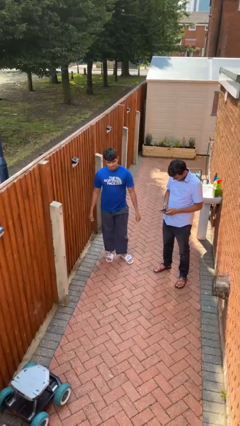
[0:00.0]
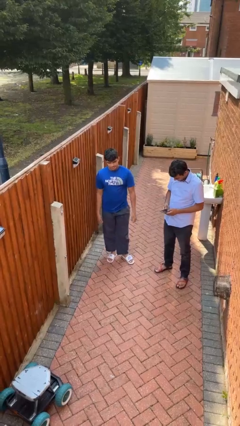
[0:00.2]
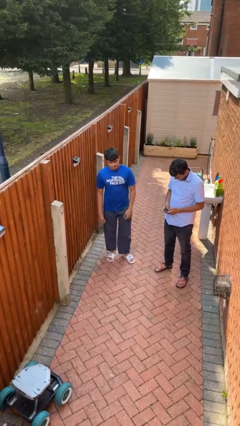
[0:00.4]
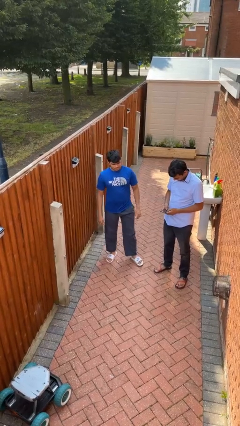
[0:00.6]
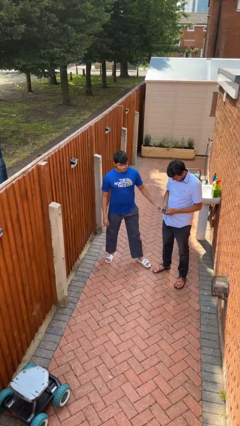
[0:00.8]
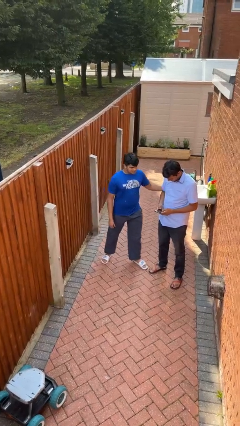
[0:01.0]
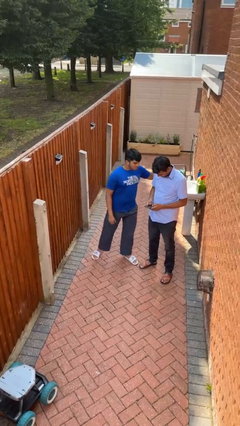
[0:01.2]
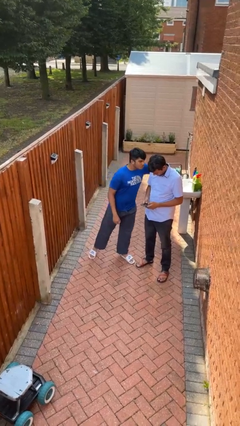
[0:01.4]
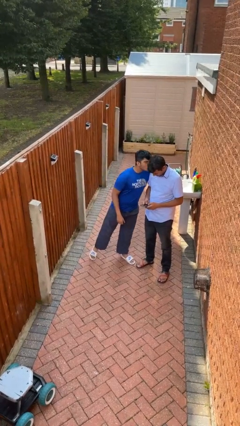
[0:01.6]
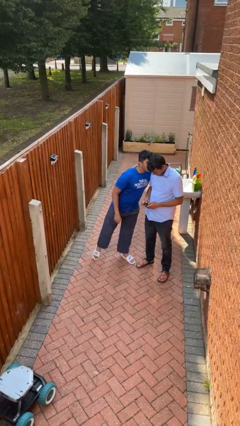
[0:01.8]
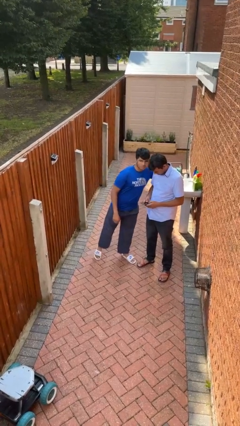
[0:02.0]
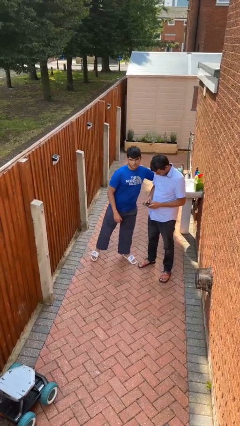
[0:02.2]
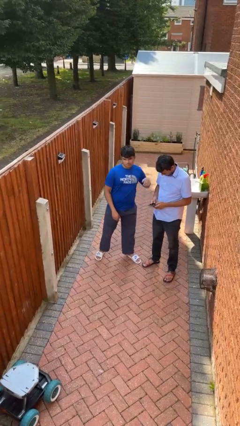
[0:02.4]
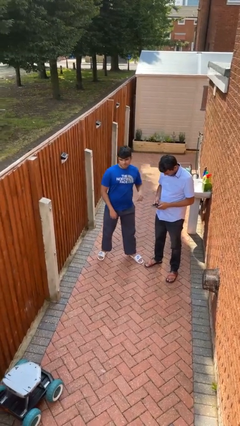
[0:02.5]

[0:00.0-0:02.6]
person kisses cheek of person

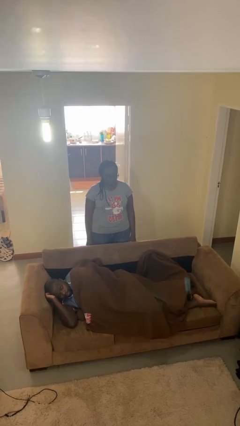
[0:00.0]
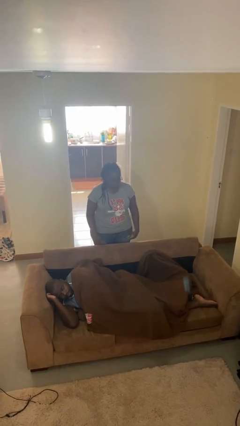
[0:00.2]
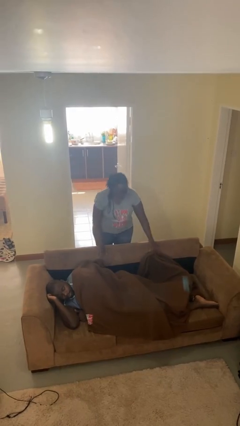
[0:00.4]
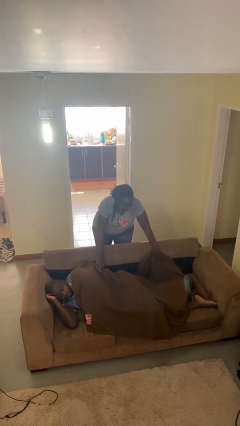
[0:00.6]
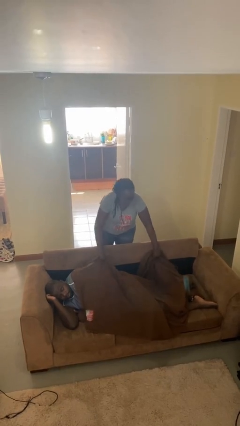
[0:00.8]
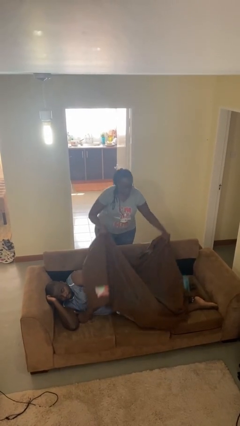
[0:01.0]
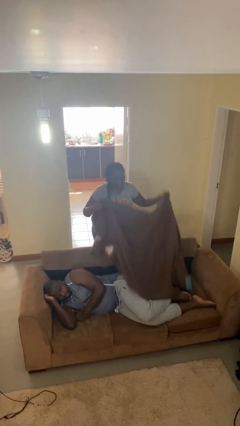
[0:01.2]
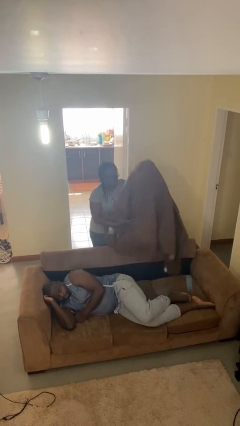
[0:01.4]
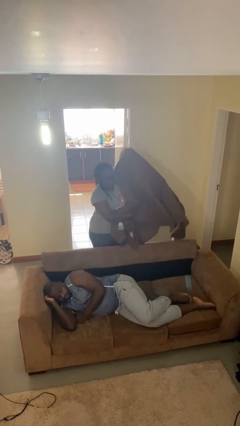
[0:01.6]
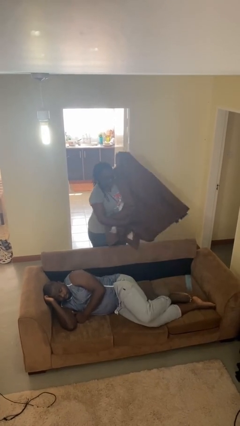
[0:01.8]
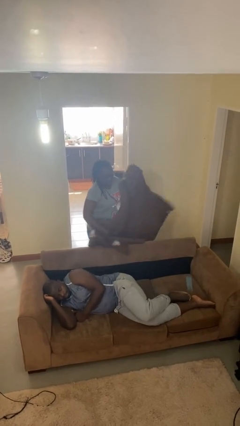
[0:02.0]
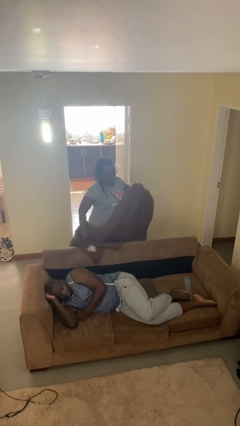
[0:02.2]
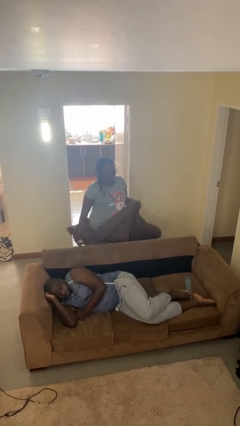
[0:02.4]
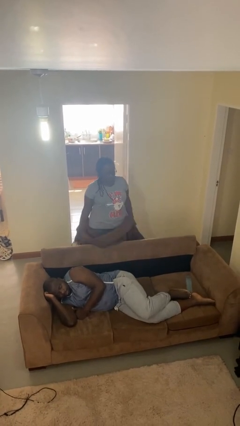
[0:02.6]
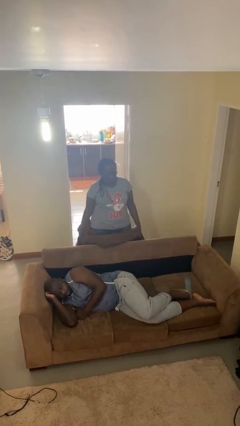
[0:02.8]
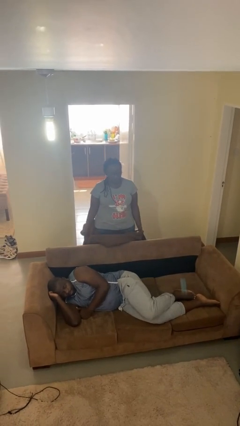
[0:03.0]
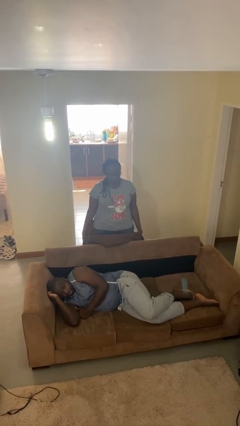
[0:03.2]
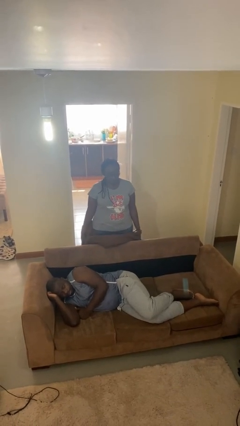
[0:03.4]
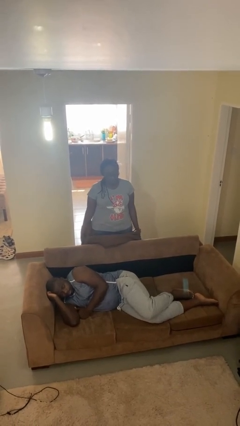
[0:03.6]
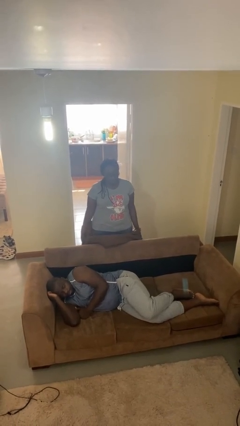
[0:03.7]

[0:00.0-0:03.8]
person uncovers friend with blanket

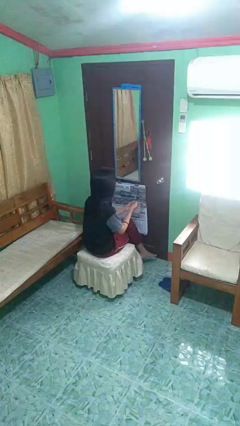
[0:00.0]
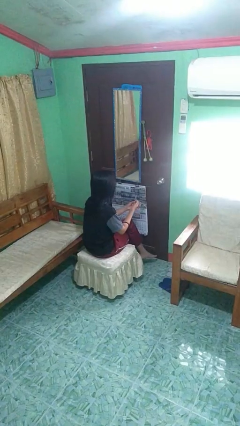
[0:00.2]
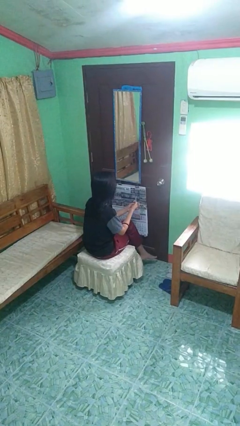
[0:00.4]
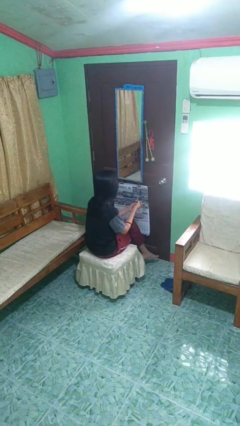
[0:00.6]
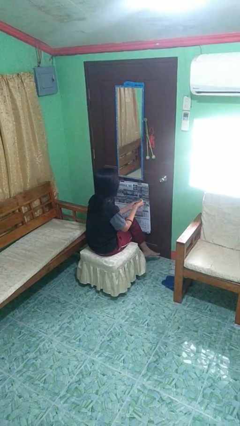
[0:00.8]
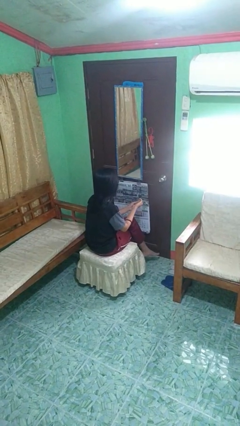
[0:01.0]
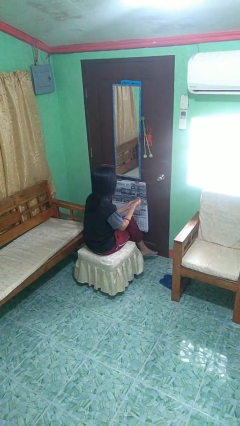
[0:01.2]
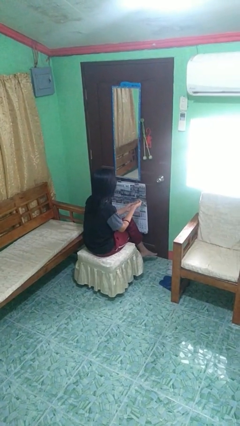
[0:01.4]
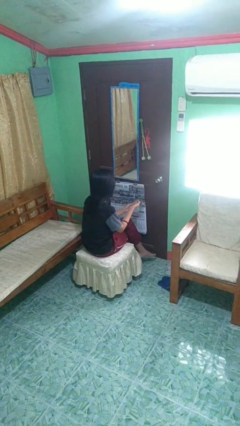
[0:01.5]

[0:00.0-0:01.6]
person cracks knuckles

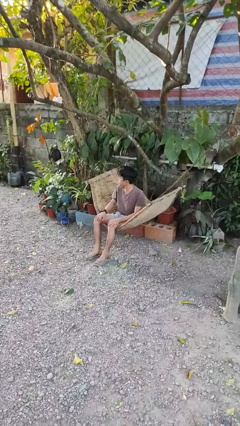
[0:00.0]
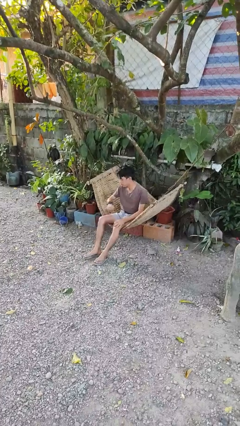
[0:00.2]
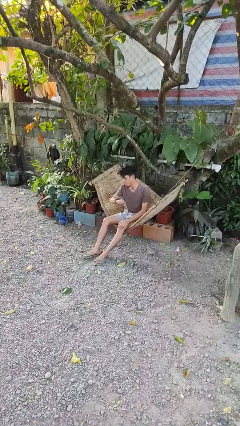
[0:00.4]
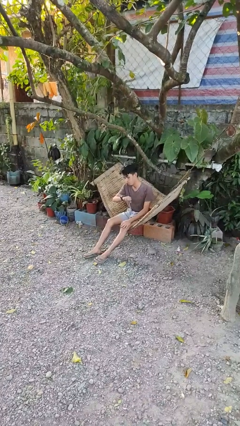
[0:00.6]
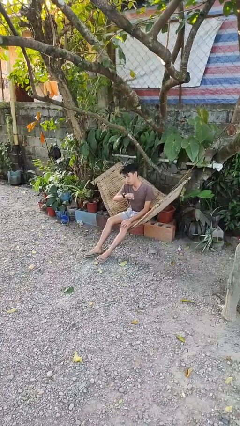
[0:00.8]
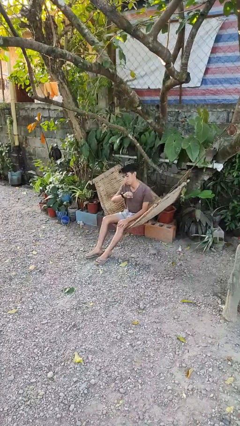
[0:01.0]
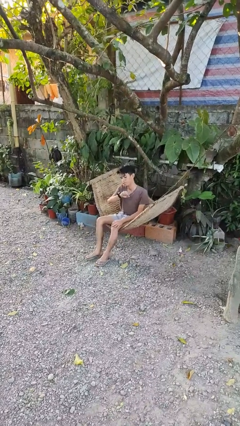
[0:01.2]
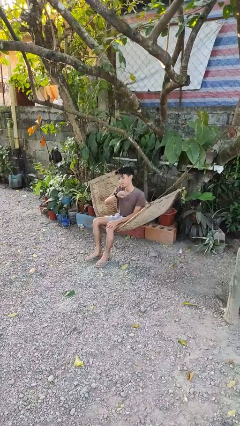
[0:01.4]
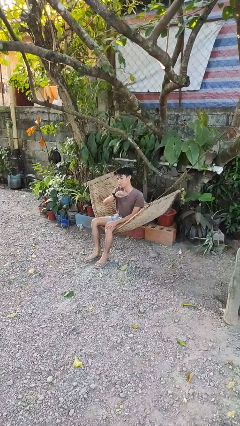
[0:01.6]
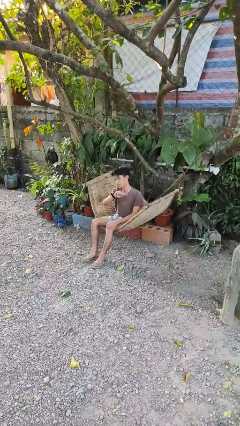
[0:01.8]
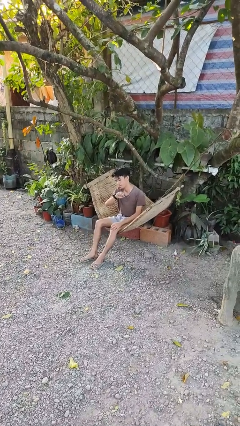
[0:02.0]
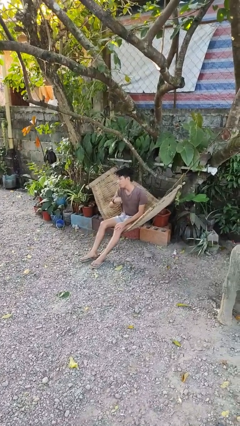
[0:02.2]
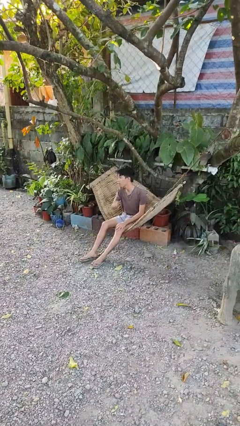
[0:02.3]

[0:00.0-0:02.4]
person looks at wristwatch

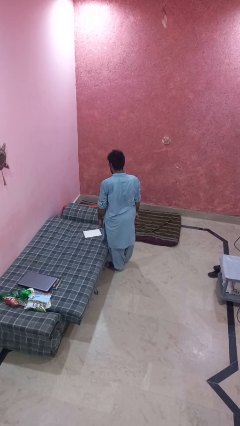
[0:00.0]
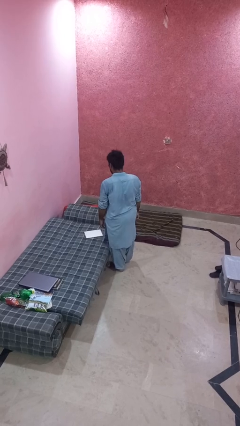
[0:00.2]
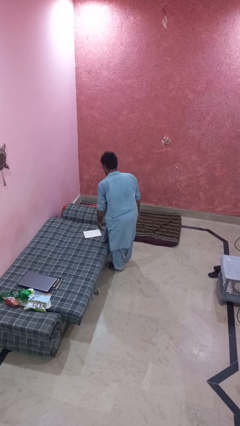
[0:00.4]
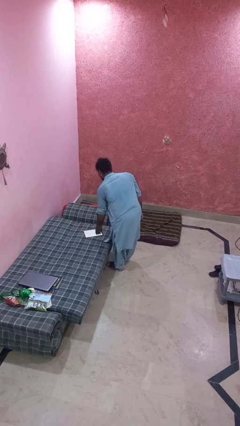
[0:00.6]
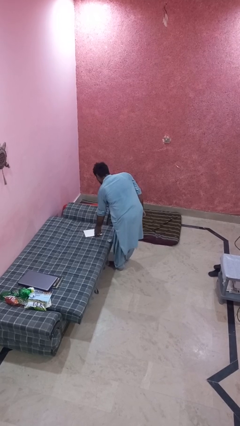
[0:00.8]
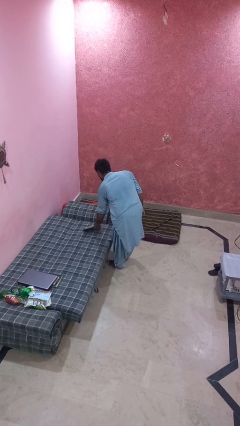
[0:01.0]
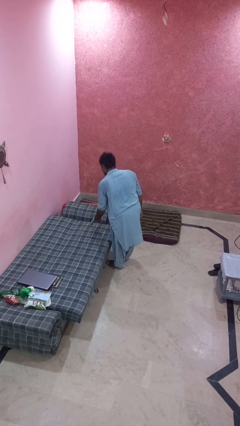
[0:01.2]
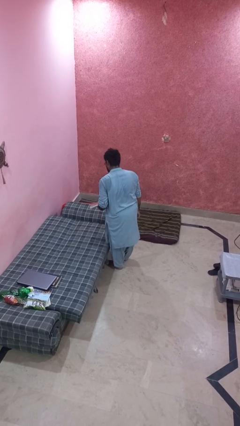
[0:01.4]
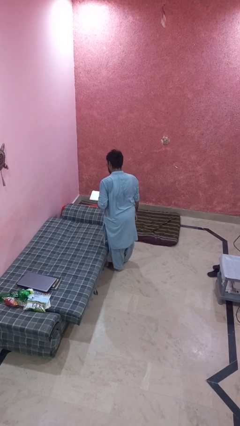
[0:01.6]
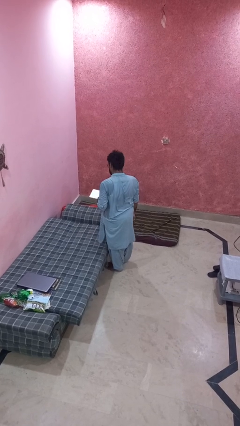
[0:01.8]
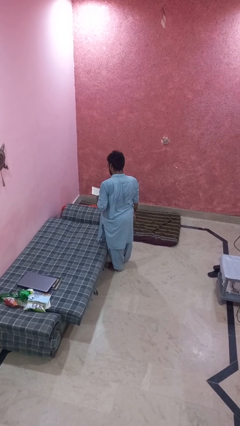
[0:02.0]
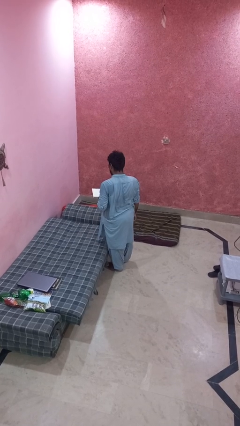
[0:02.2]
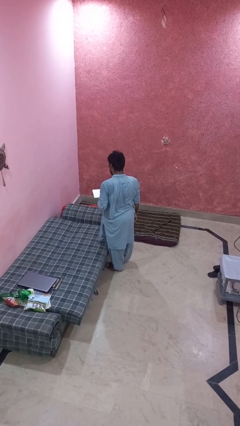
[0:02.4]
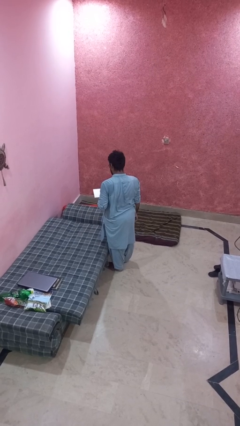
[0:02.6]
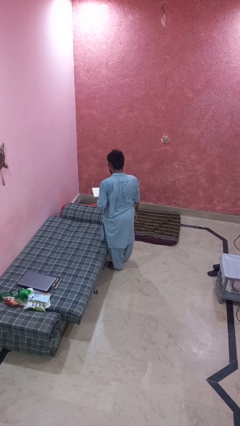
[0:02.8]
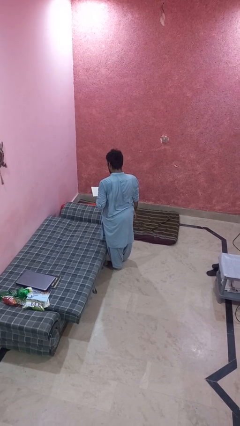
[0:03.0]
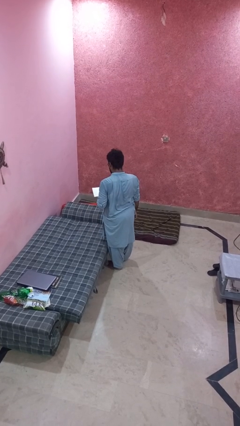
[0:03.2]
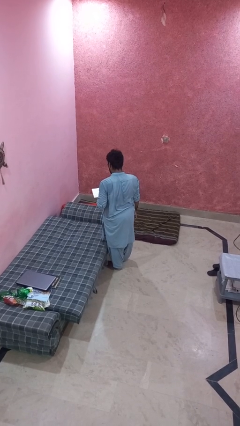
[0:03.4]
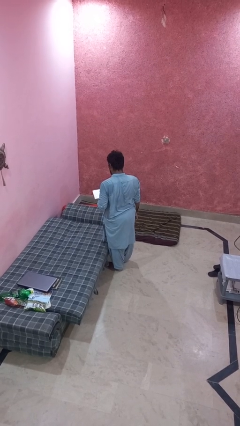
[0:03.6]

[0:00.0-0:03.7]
person picks up object from bed

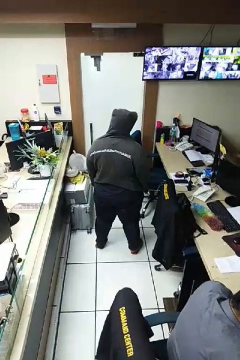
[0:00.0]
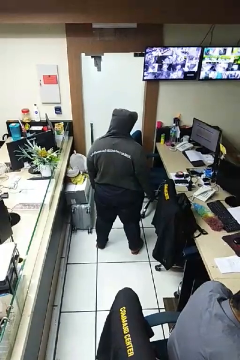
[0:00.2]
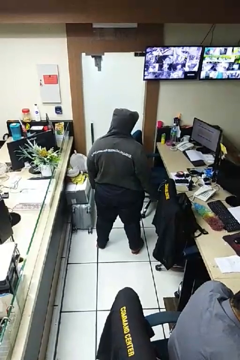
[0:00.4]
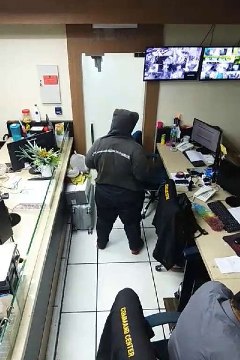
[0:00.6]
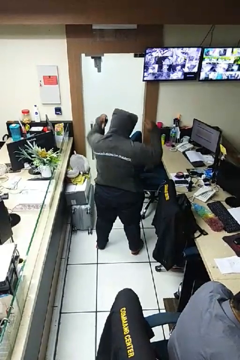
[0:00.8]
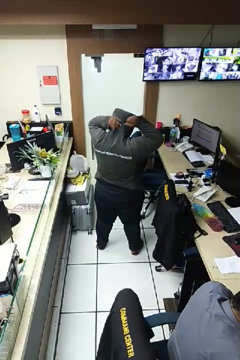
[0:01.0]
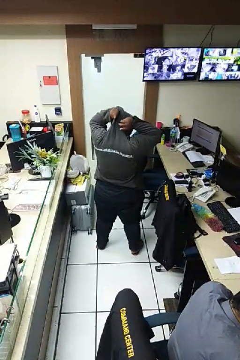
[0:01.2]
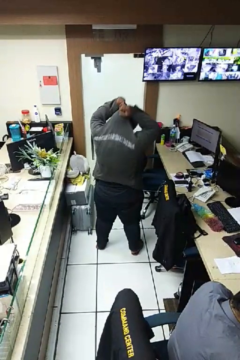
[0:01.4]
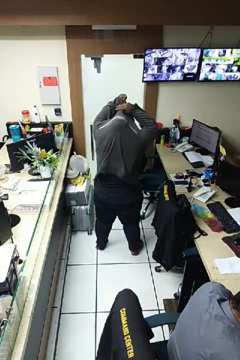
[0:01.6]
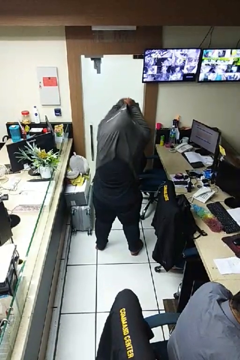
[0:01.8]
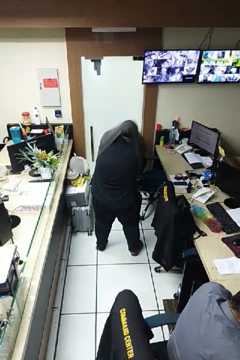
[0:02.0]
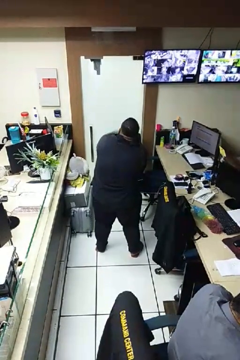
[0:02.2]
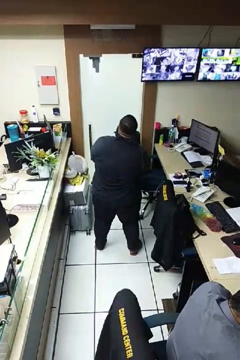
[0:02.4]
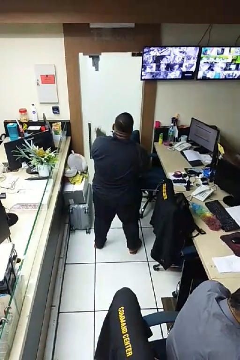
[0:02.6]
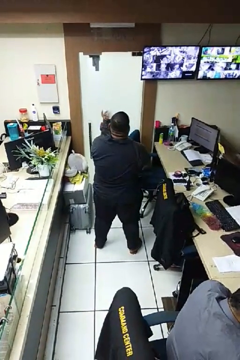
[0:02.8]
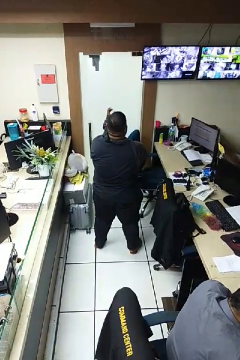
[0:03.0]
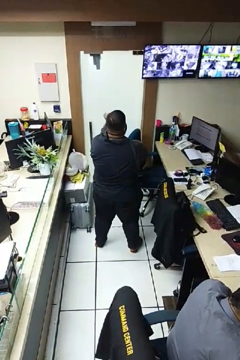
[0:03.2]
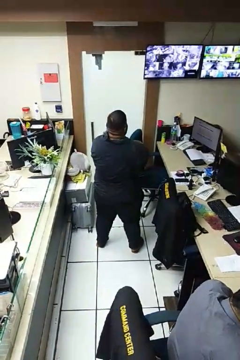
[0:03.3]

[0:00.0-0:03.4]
person takes off hoodie

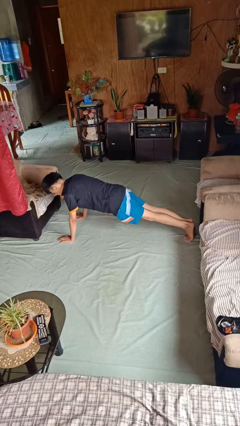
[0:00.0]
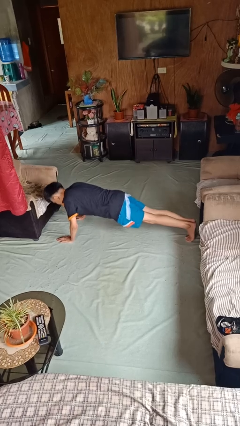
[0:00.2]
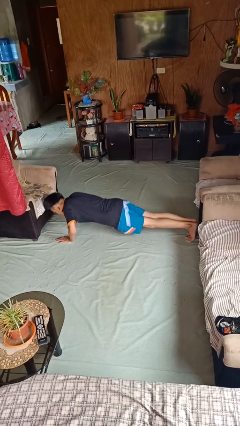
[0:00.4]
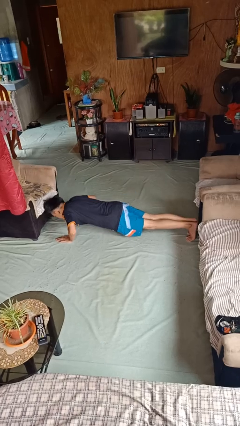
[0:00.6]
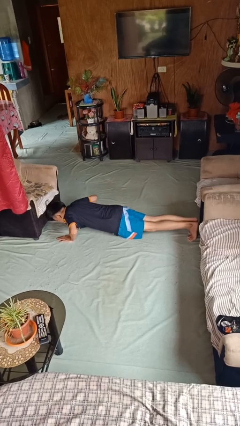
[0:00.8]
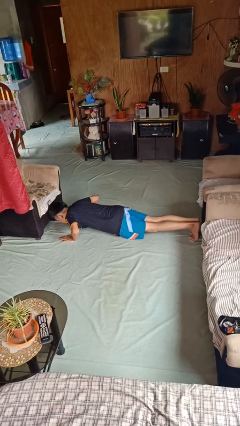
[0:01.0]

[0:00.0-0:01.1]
person exercises with pushup
